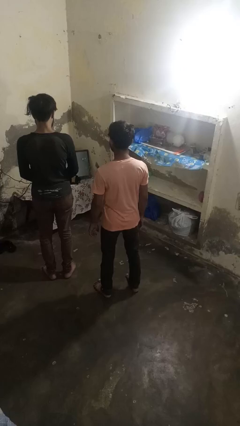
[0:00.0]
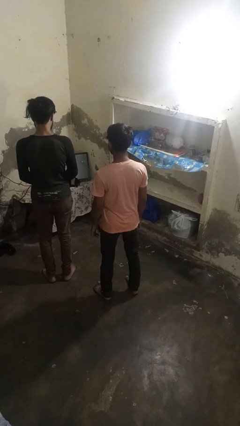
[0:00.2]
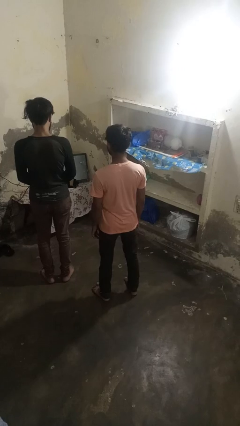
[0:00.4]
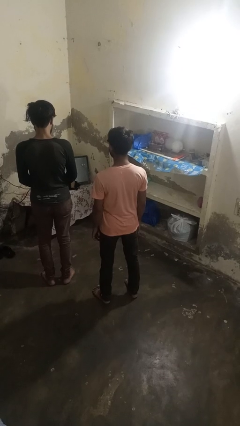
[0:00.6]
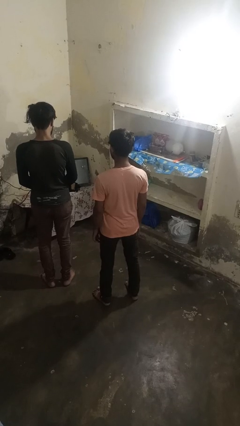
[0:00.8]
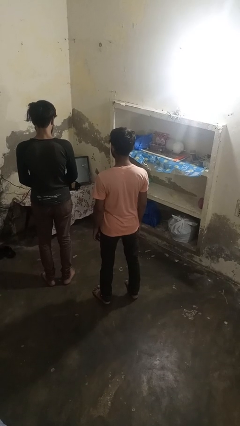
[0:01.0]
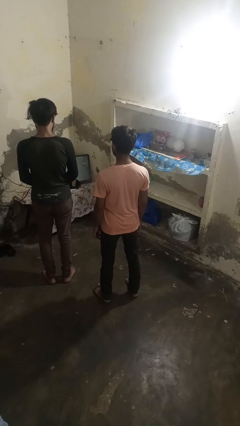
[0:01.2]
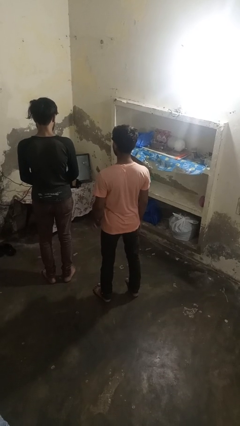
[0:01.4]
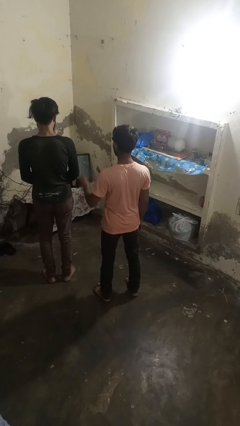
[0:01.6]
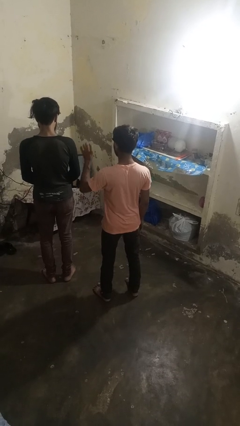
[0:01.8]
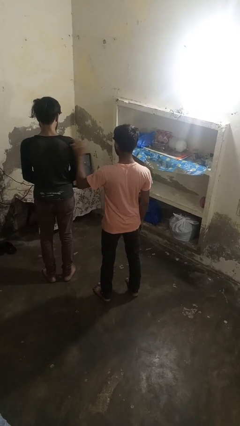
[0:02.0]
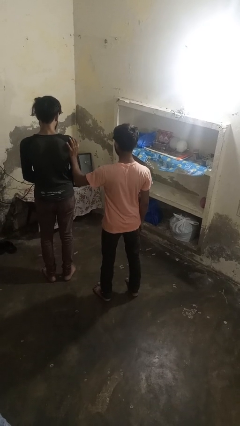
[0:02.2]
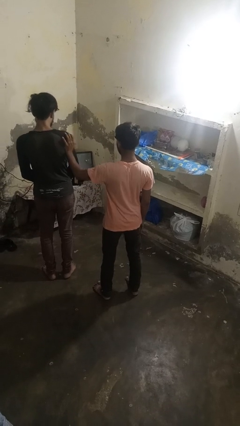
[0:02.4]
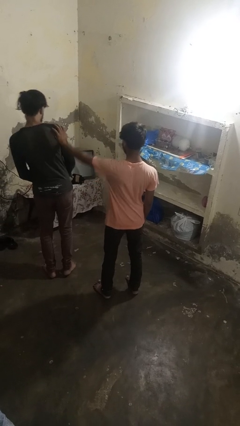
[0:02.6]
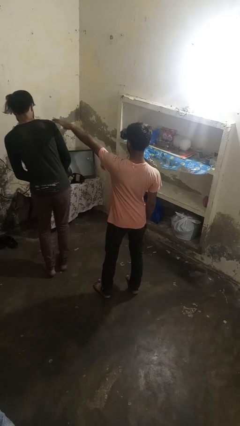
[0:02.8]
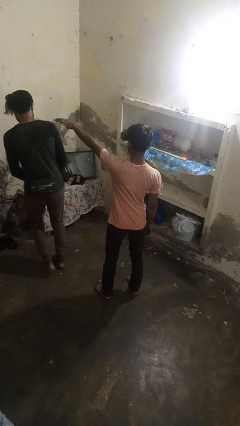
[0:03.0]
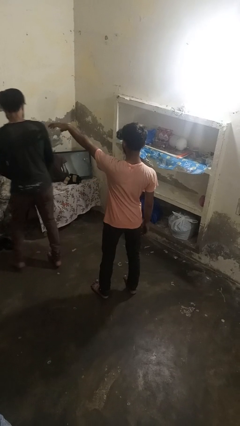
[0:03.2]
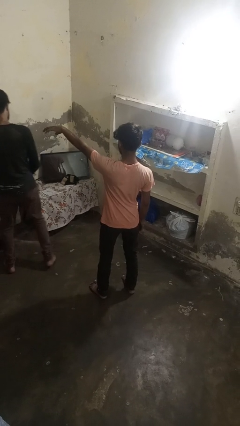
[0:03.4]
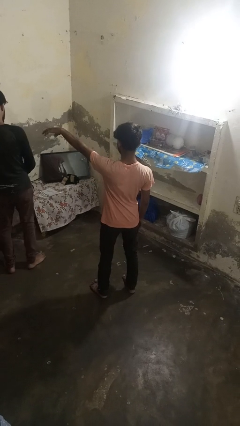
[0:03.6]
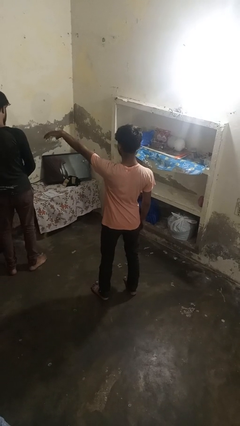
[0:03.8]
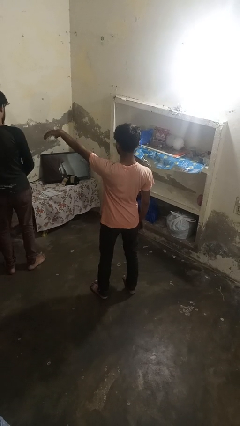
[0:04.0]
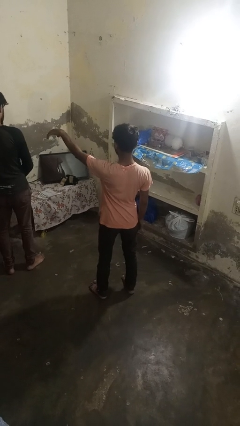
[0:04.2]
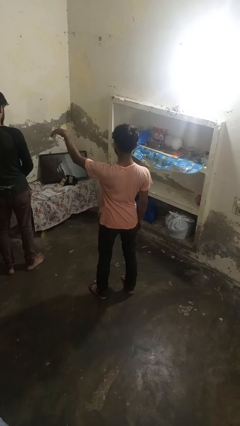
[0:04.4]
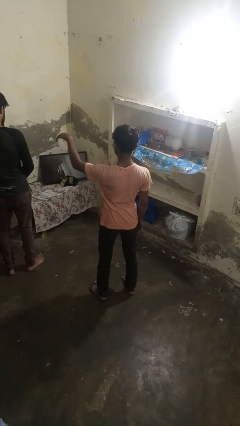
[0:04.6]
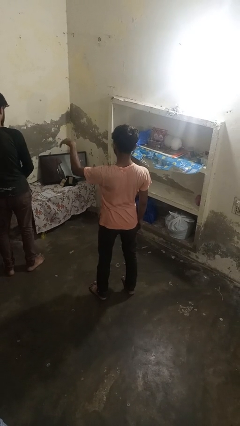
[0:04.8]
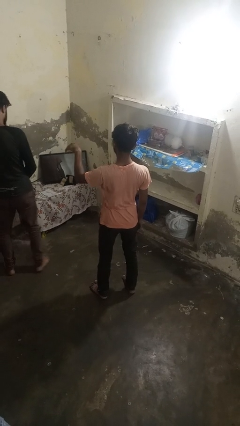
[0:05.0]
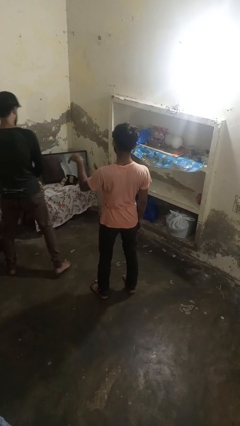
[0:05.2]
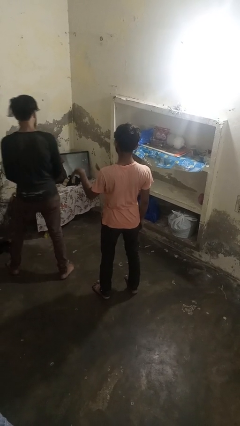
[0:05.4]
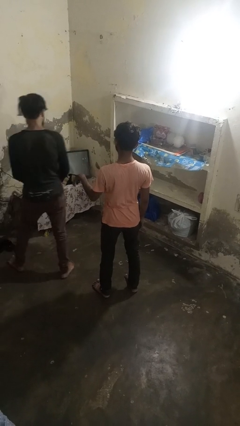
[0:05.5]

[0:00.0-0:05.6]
person shoves person

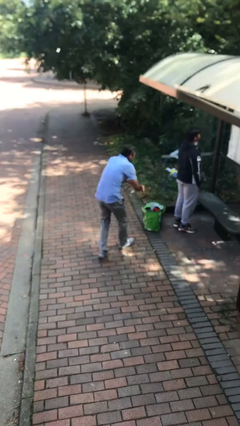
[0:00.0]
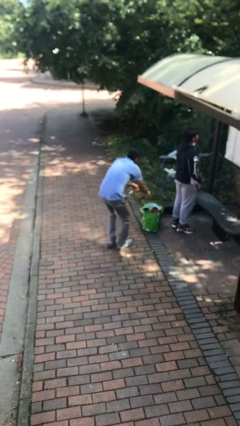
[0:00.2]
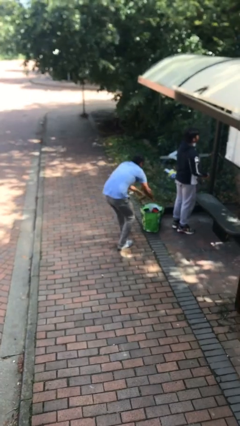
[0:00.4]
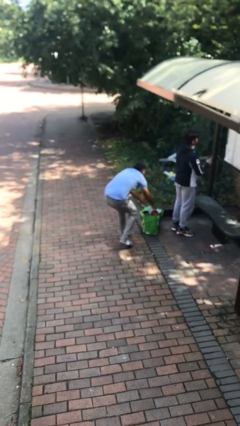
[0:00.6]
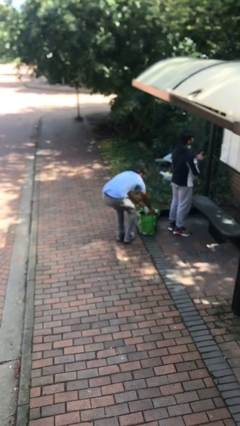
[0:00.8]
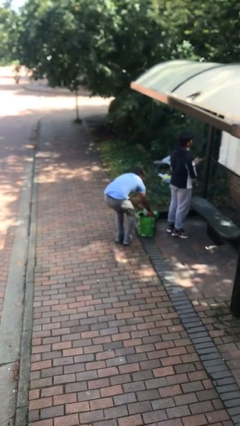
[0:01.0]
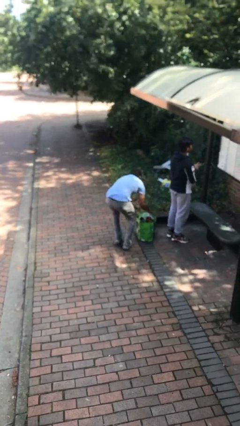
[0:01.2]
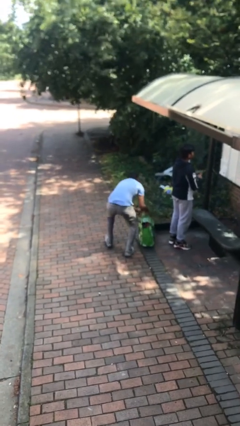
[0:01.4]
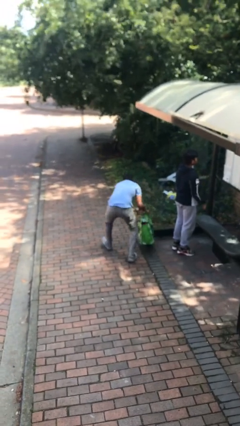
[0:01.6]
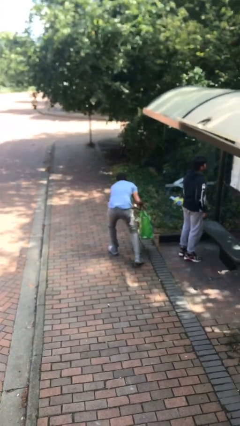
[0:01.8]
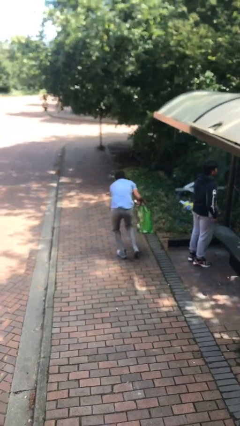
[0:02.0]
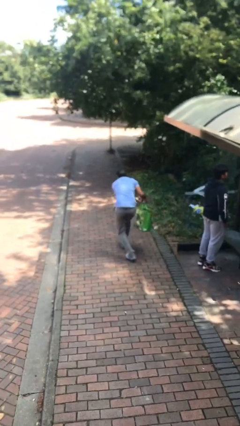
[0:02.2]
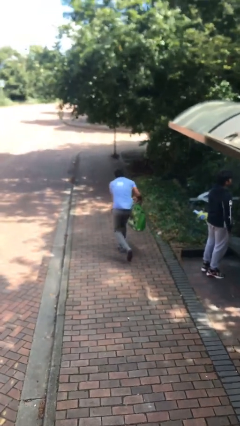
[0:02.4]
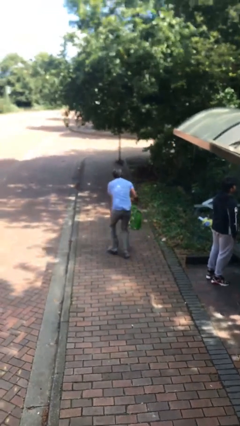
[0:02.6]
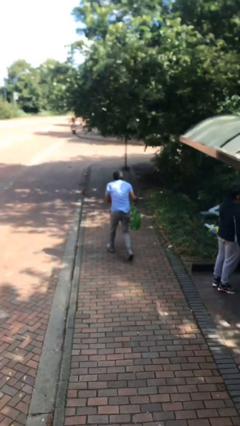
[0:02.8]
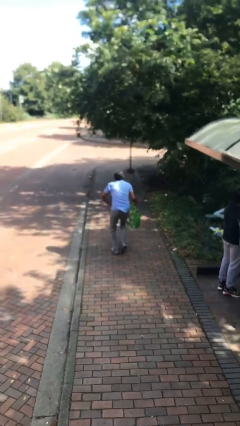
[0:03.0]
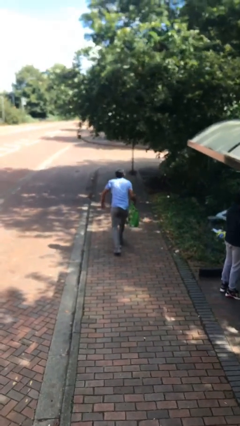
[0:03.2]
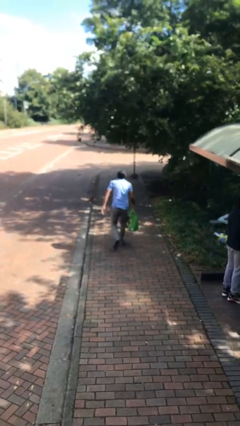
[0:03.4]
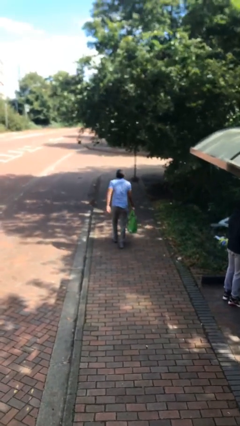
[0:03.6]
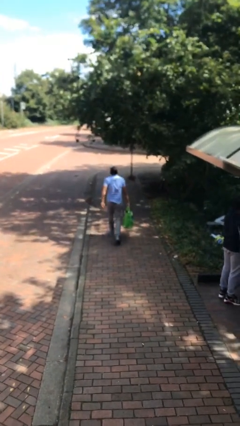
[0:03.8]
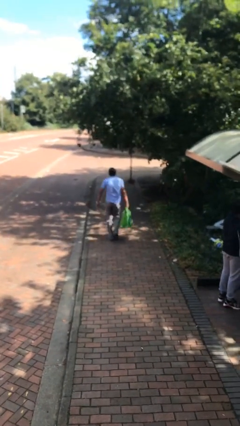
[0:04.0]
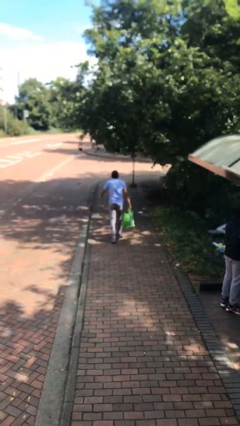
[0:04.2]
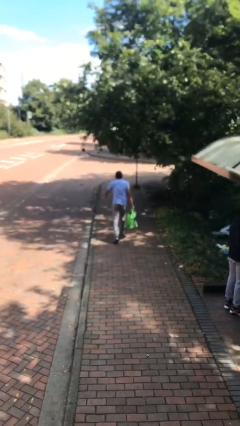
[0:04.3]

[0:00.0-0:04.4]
person steals object from person

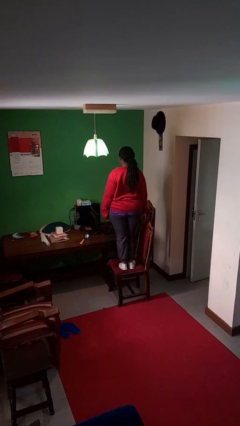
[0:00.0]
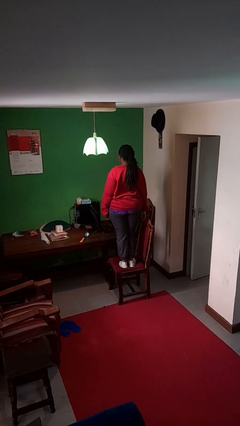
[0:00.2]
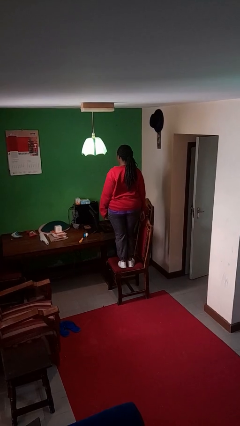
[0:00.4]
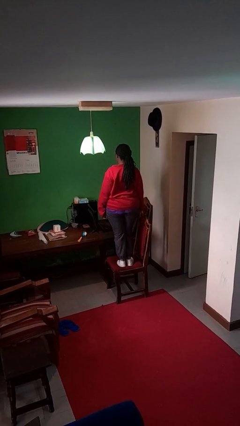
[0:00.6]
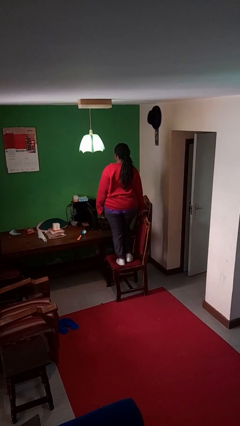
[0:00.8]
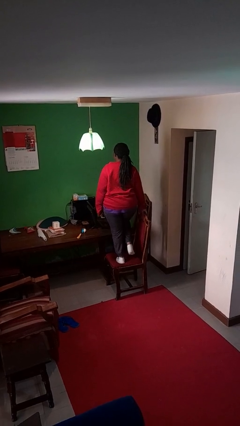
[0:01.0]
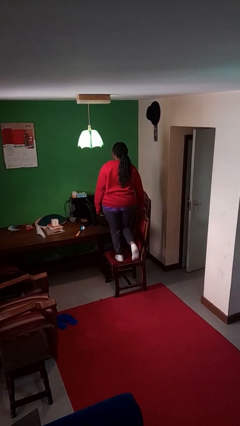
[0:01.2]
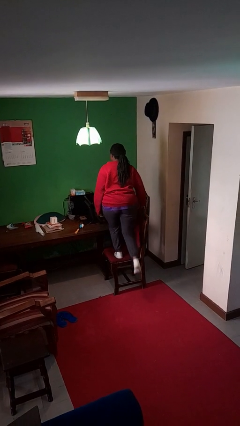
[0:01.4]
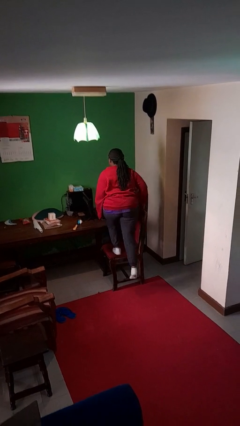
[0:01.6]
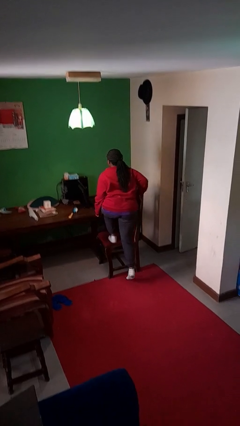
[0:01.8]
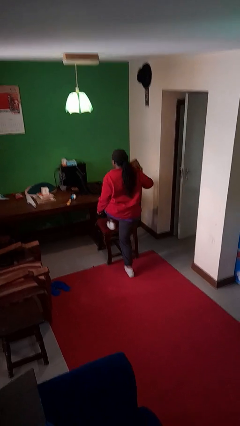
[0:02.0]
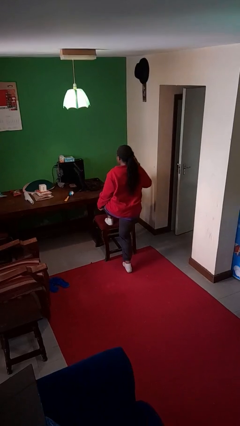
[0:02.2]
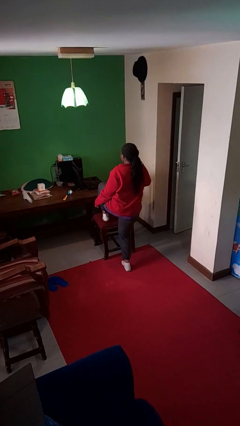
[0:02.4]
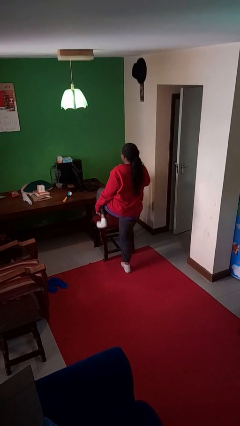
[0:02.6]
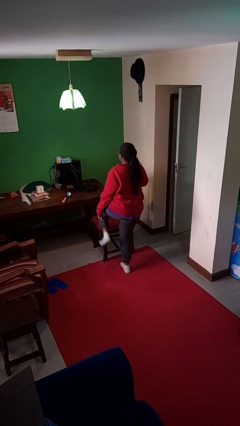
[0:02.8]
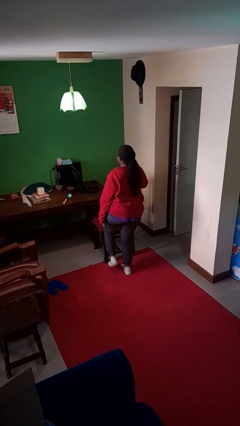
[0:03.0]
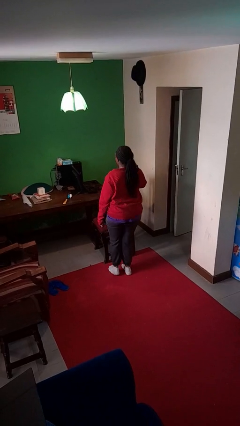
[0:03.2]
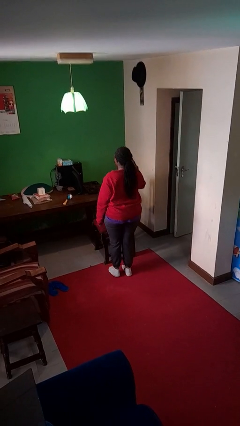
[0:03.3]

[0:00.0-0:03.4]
person climbs off chair

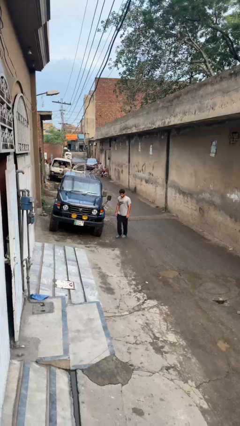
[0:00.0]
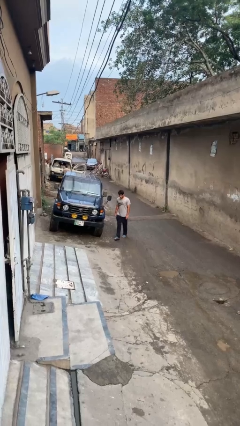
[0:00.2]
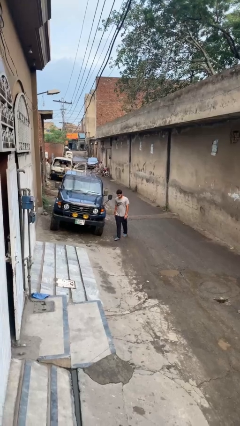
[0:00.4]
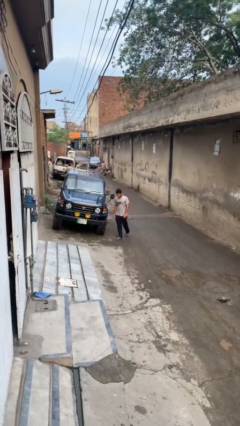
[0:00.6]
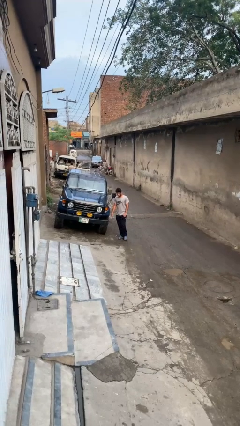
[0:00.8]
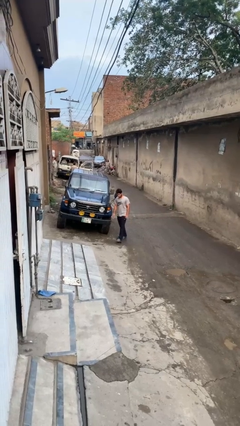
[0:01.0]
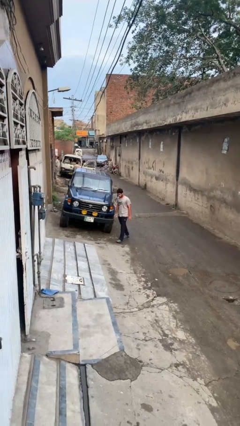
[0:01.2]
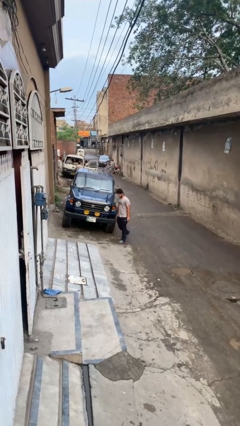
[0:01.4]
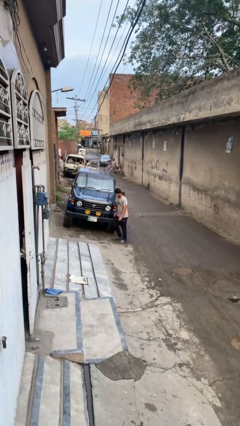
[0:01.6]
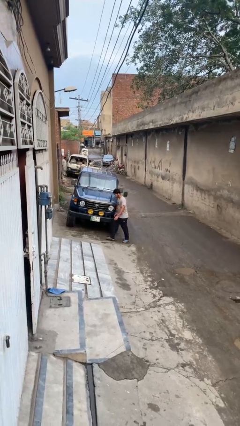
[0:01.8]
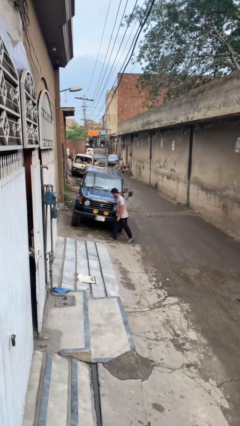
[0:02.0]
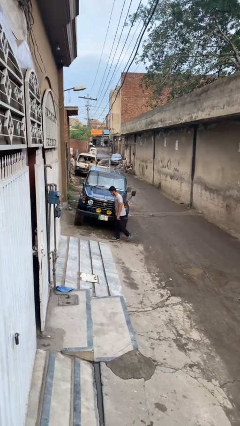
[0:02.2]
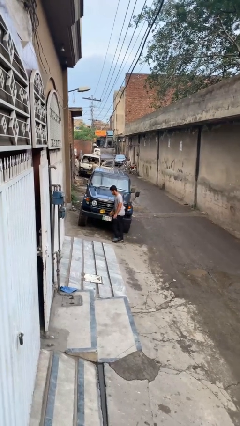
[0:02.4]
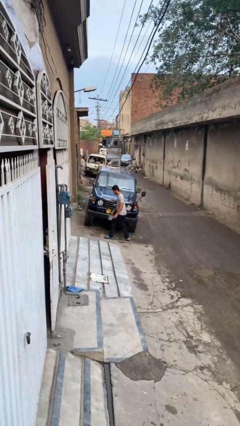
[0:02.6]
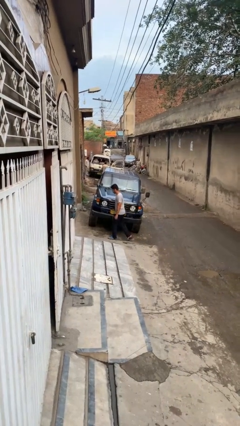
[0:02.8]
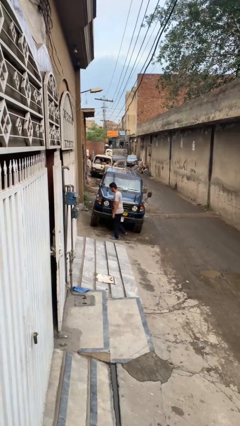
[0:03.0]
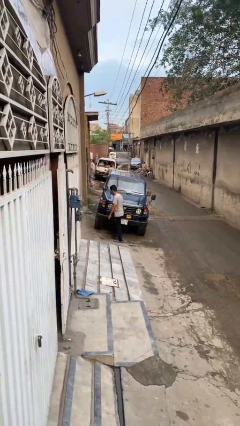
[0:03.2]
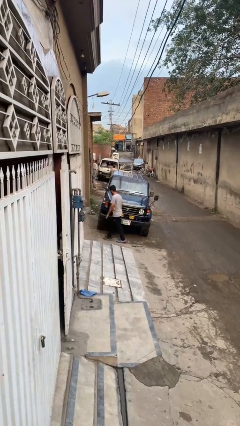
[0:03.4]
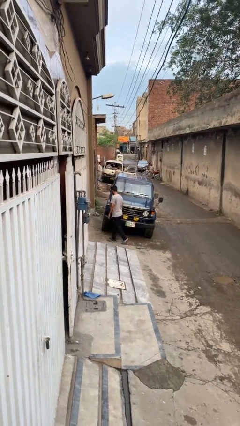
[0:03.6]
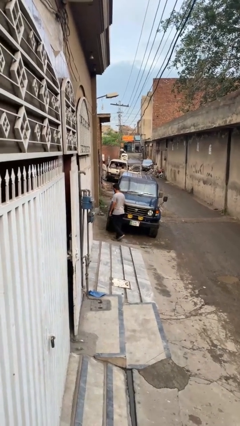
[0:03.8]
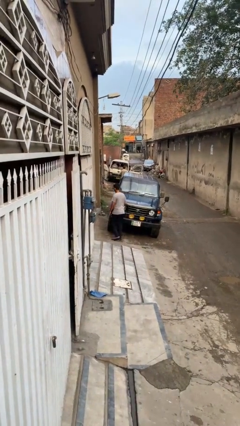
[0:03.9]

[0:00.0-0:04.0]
person walks around car

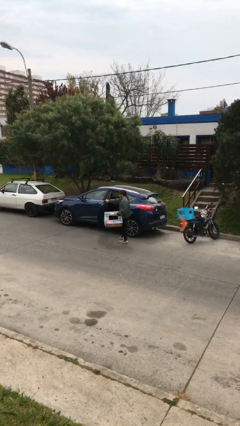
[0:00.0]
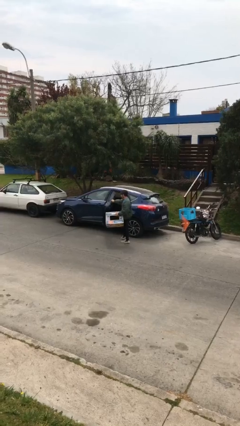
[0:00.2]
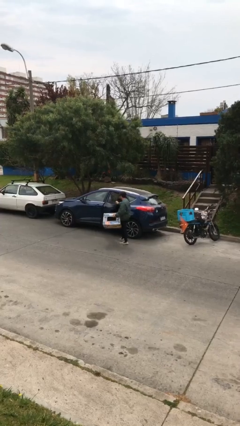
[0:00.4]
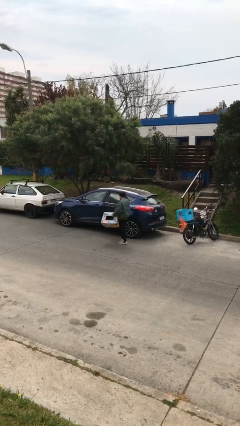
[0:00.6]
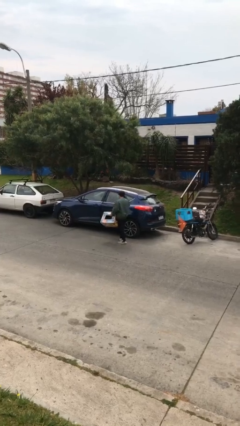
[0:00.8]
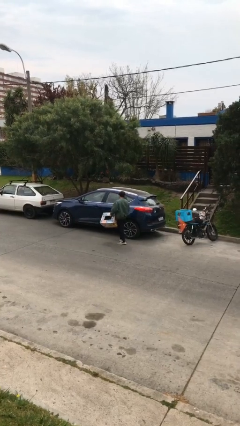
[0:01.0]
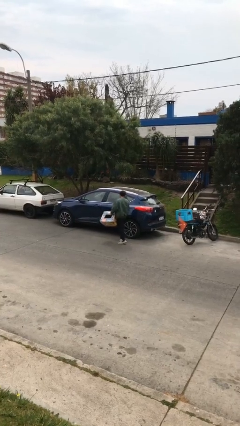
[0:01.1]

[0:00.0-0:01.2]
person closes car door
